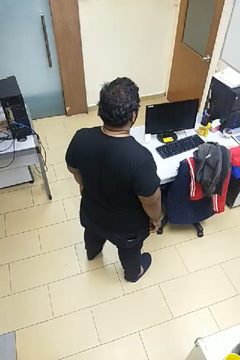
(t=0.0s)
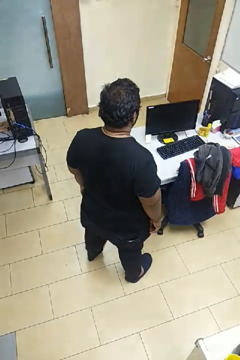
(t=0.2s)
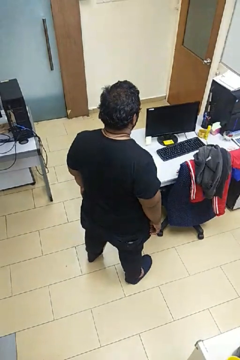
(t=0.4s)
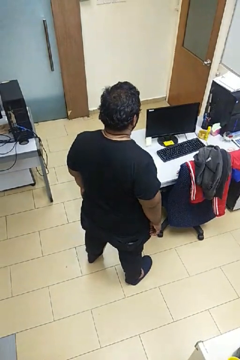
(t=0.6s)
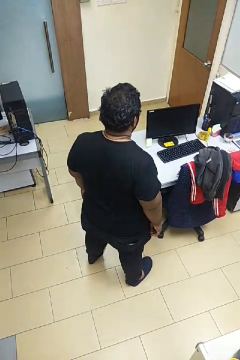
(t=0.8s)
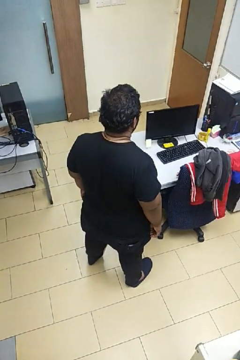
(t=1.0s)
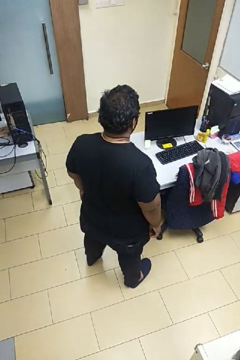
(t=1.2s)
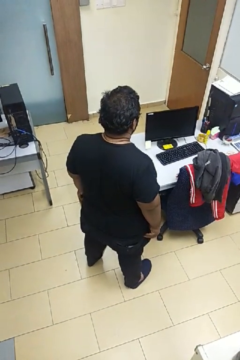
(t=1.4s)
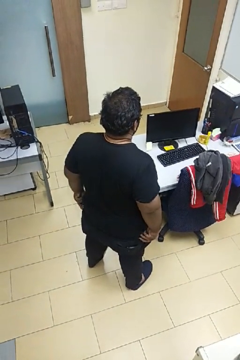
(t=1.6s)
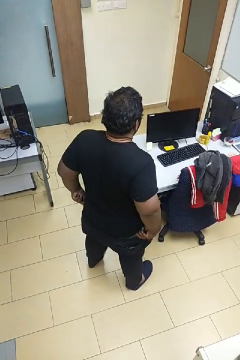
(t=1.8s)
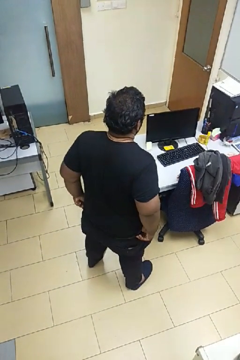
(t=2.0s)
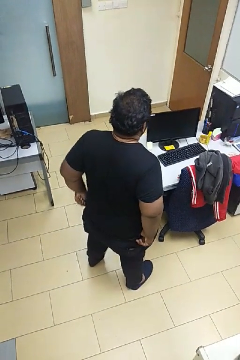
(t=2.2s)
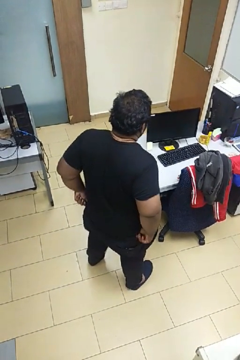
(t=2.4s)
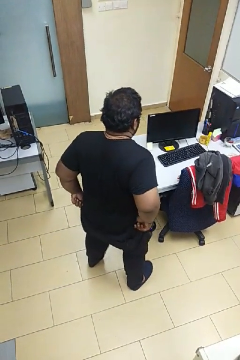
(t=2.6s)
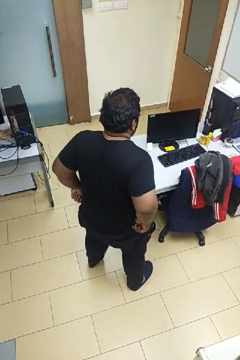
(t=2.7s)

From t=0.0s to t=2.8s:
person hikes up pants

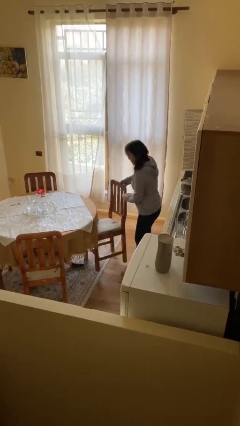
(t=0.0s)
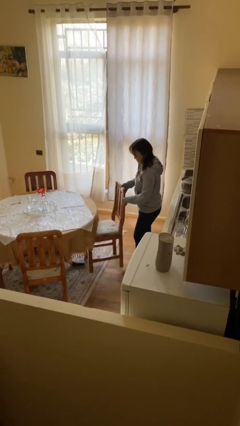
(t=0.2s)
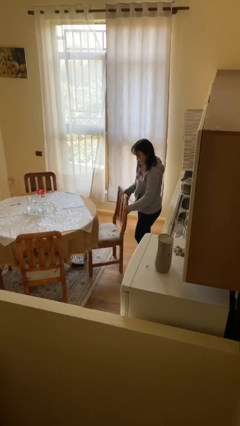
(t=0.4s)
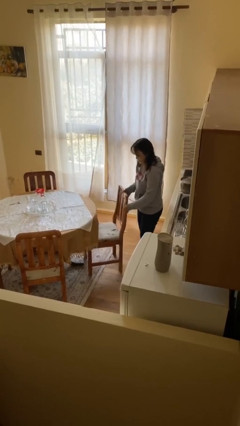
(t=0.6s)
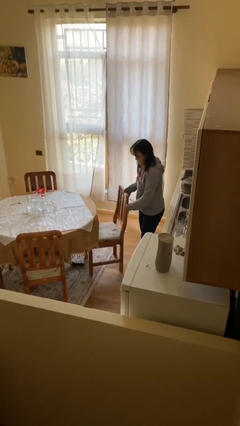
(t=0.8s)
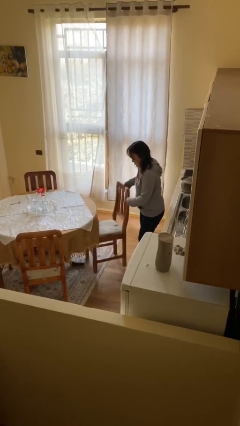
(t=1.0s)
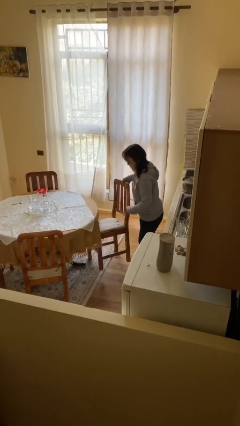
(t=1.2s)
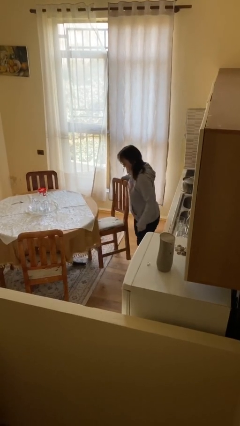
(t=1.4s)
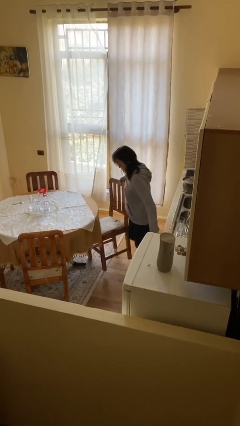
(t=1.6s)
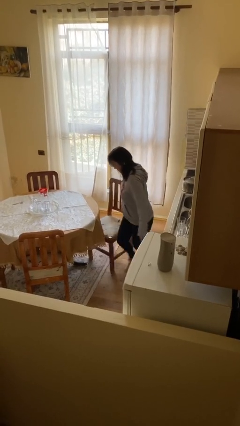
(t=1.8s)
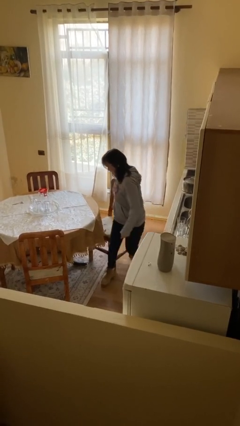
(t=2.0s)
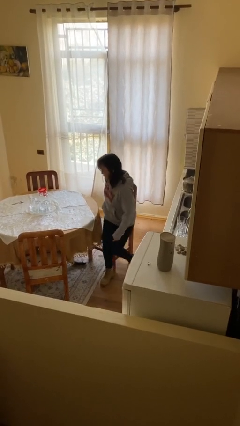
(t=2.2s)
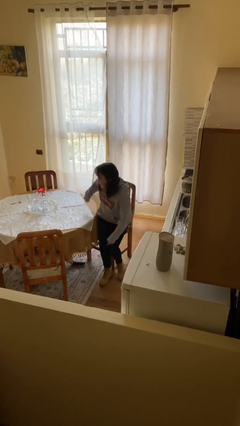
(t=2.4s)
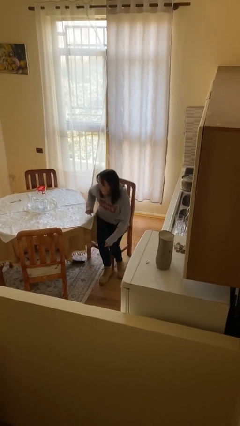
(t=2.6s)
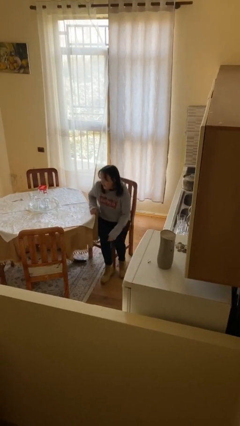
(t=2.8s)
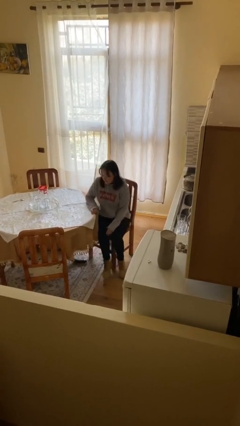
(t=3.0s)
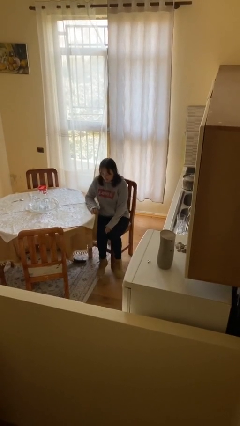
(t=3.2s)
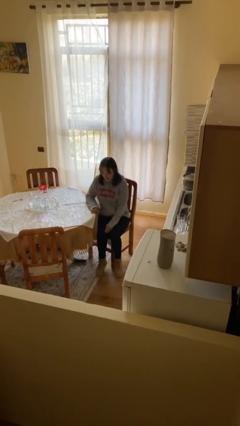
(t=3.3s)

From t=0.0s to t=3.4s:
person sits down

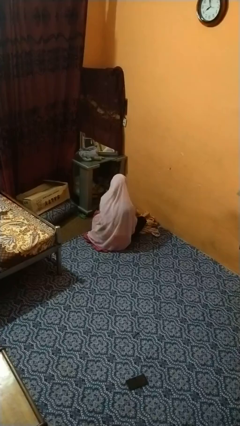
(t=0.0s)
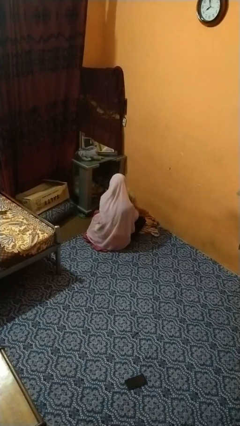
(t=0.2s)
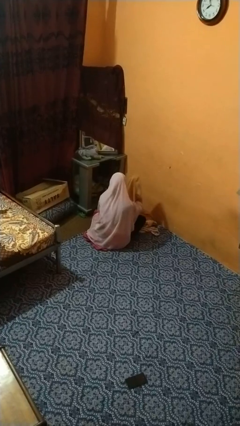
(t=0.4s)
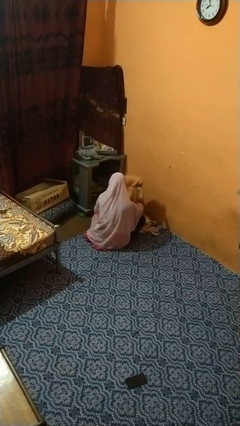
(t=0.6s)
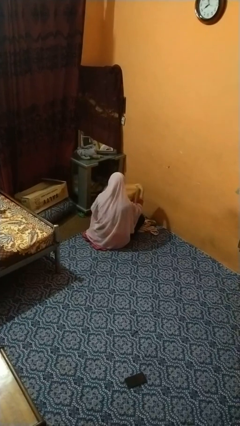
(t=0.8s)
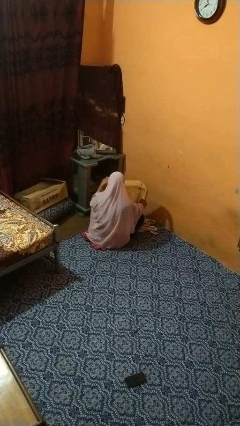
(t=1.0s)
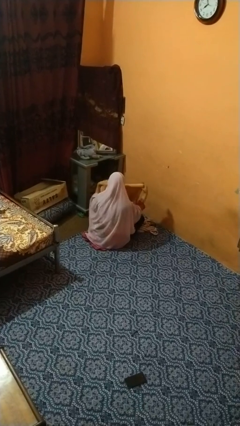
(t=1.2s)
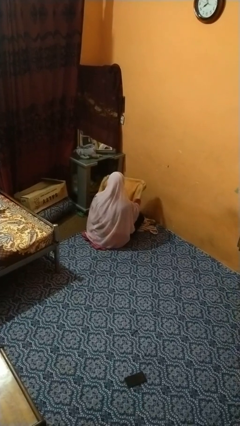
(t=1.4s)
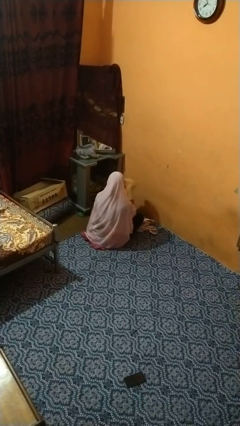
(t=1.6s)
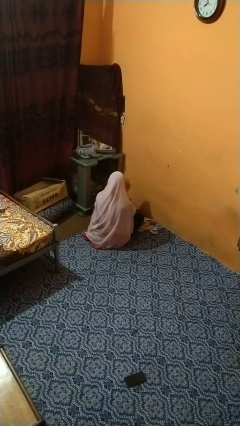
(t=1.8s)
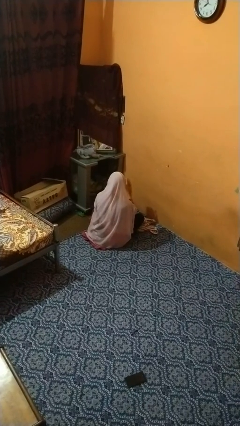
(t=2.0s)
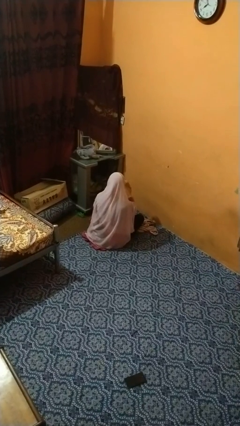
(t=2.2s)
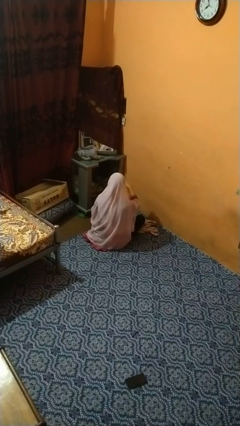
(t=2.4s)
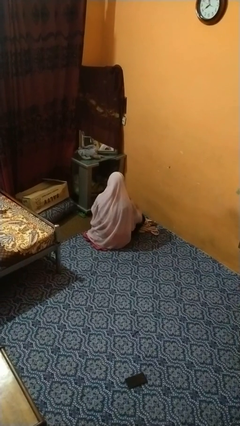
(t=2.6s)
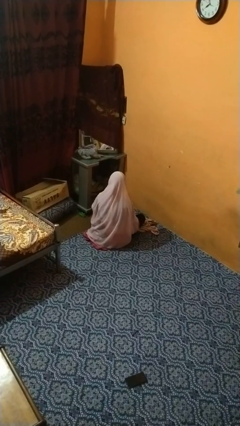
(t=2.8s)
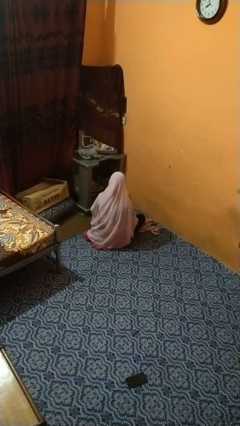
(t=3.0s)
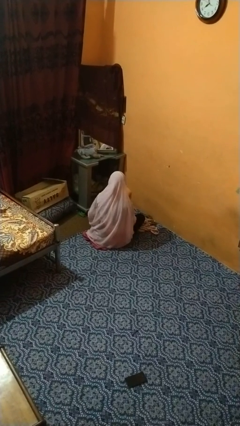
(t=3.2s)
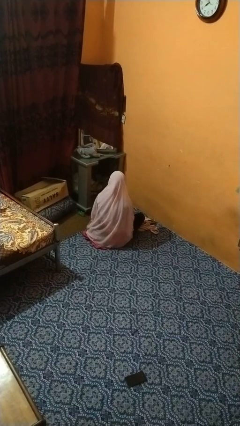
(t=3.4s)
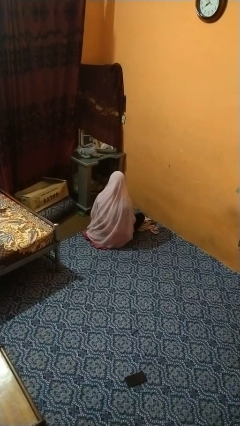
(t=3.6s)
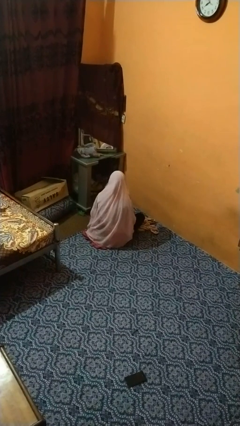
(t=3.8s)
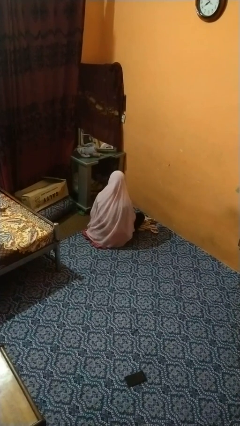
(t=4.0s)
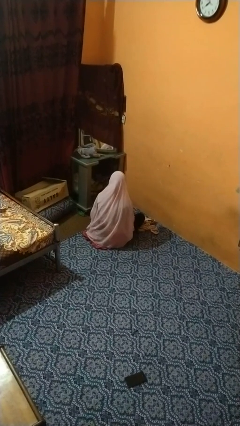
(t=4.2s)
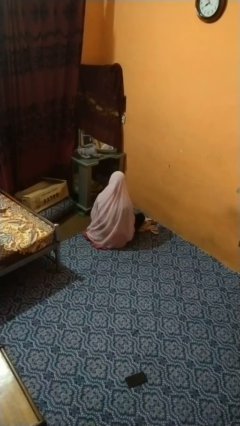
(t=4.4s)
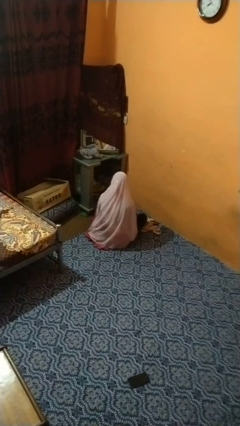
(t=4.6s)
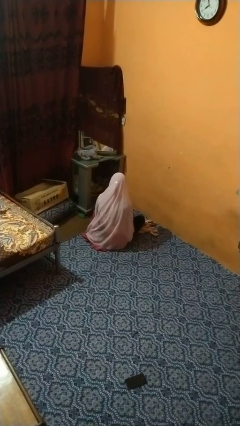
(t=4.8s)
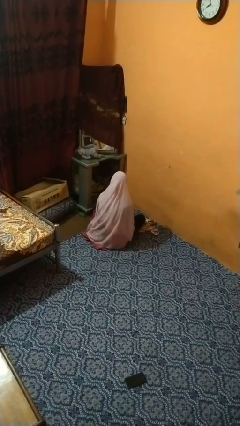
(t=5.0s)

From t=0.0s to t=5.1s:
person folds towel

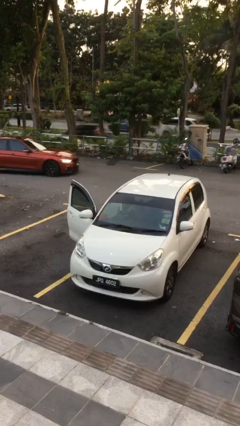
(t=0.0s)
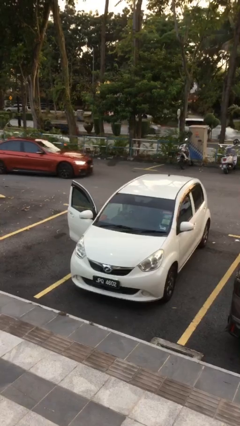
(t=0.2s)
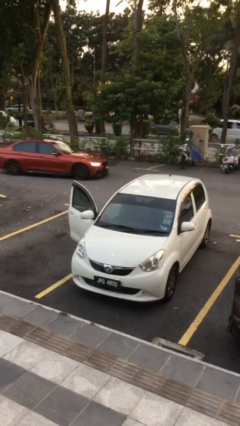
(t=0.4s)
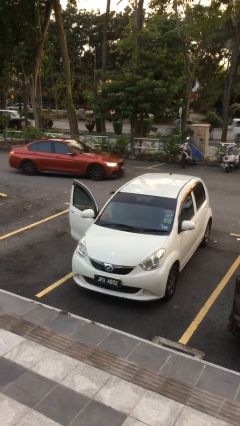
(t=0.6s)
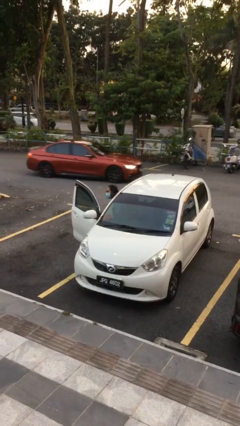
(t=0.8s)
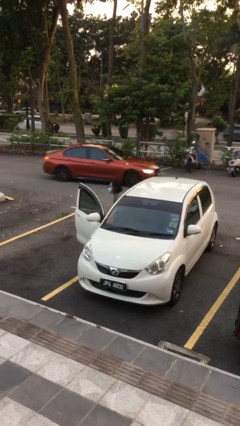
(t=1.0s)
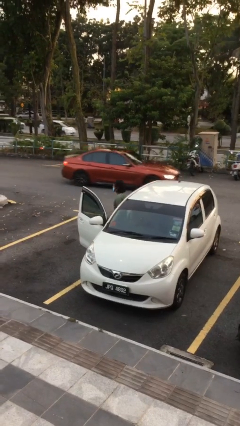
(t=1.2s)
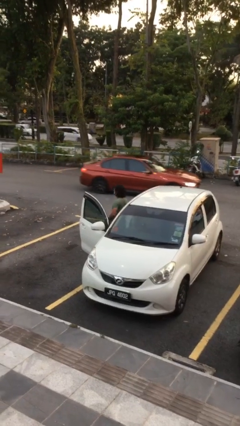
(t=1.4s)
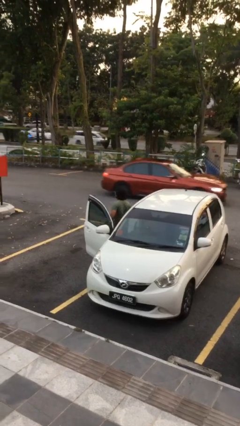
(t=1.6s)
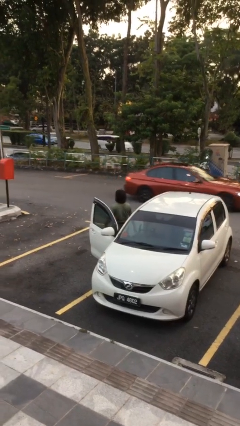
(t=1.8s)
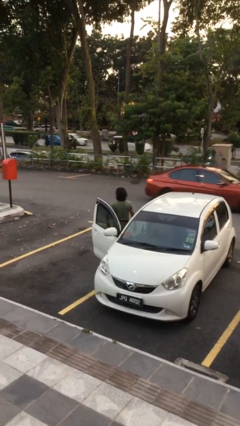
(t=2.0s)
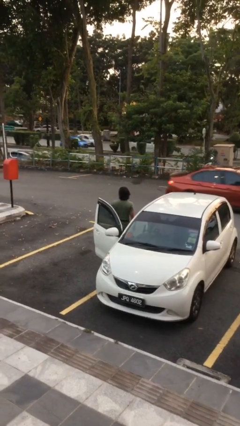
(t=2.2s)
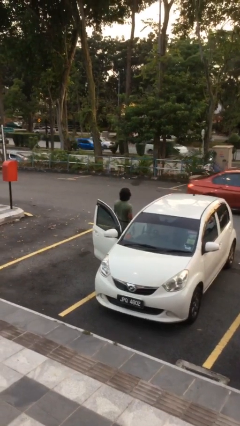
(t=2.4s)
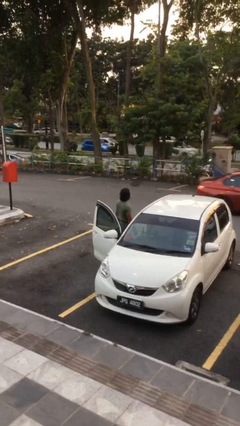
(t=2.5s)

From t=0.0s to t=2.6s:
person exits car

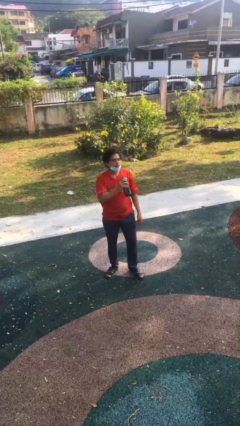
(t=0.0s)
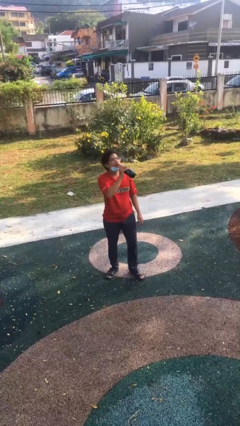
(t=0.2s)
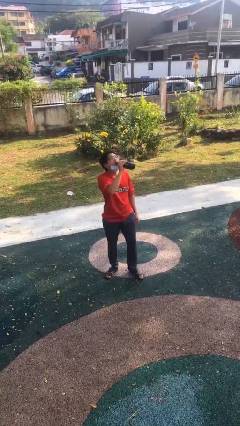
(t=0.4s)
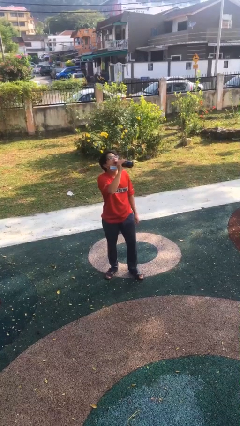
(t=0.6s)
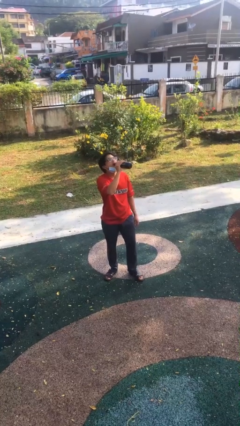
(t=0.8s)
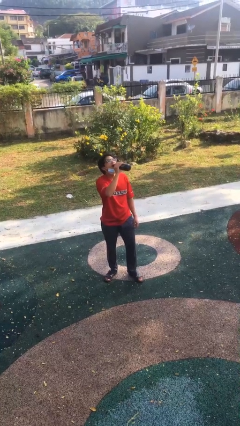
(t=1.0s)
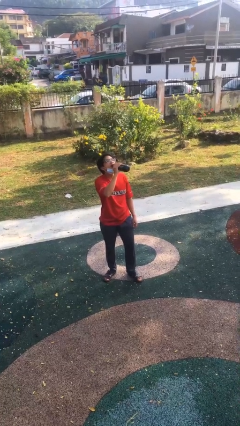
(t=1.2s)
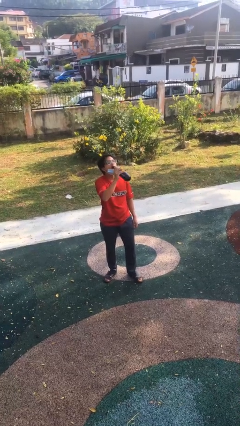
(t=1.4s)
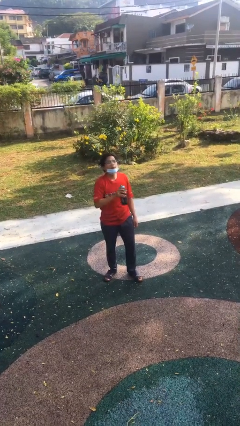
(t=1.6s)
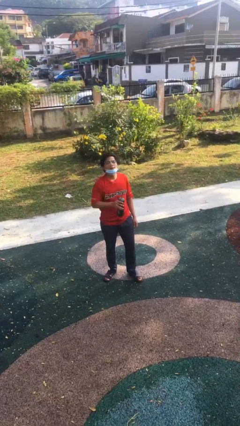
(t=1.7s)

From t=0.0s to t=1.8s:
person drinks from bottle

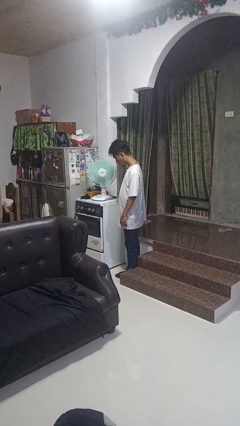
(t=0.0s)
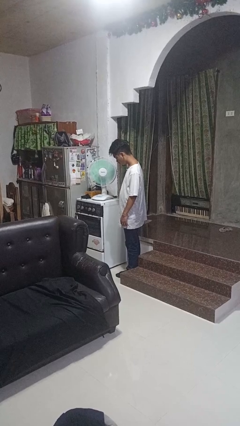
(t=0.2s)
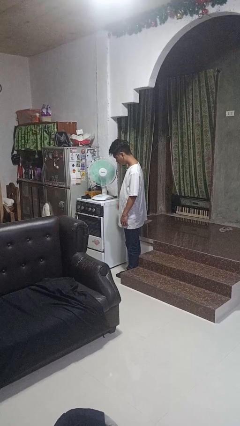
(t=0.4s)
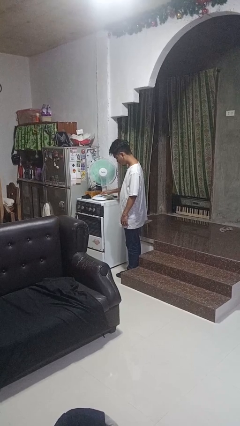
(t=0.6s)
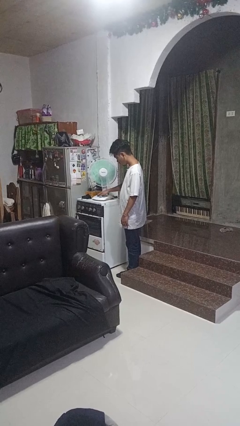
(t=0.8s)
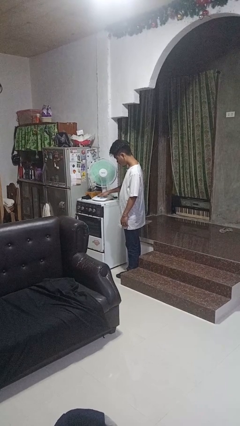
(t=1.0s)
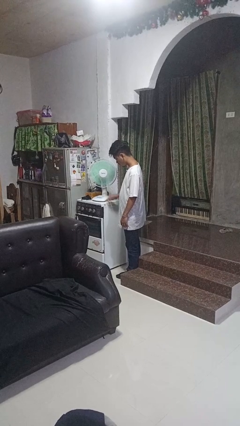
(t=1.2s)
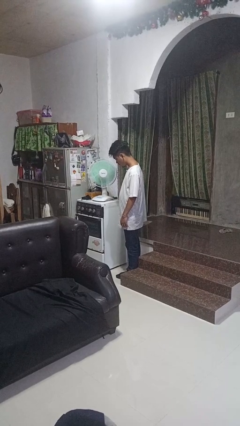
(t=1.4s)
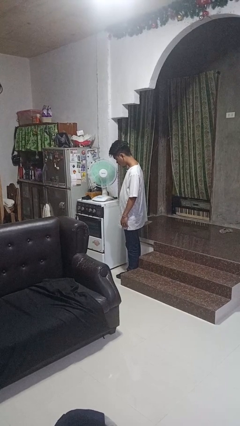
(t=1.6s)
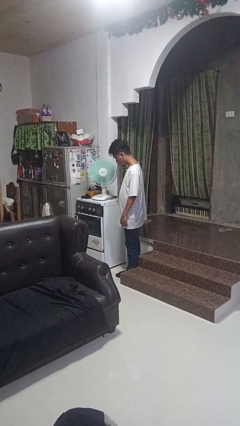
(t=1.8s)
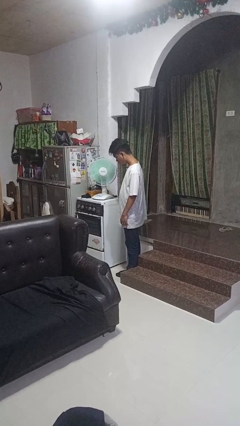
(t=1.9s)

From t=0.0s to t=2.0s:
person turns off fan

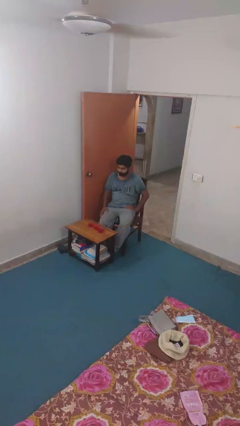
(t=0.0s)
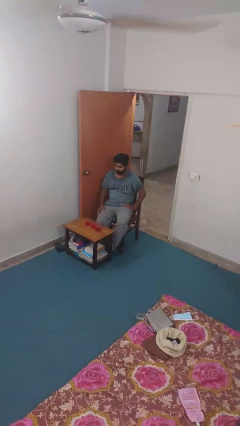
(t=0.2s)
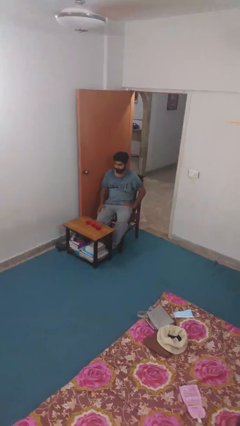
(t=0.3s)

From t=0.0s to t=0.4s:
person puts down object on table
